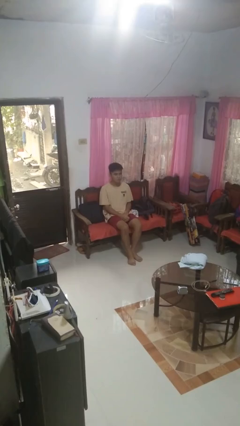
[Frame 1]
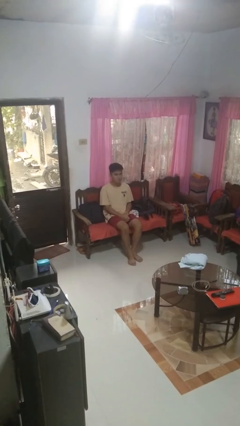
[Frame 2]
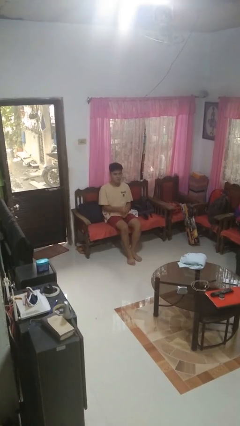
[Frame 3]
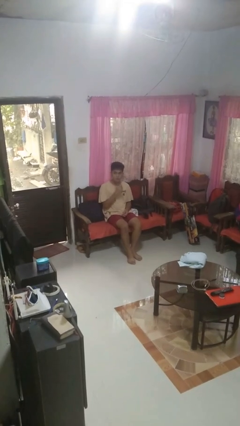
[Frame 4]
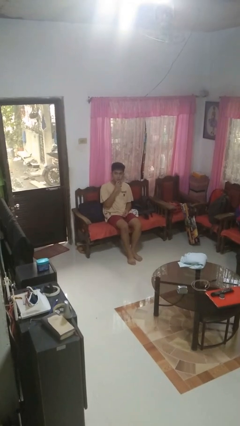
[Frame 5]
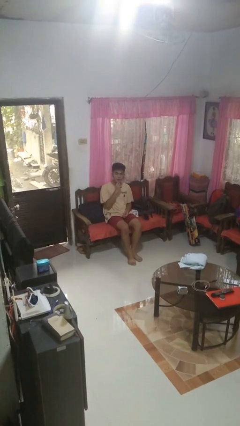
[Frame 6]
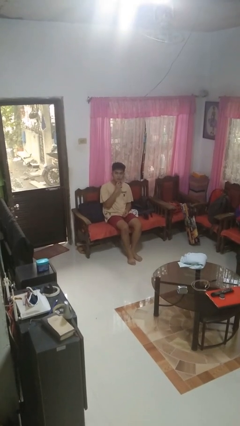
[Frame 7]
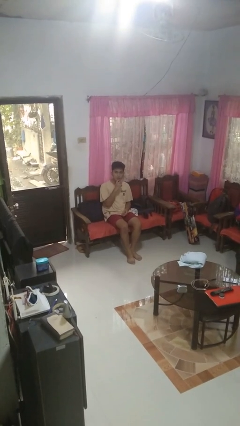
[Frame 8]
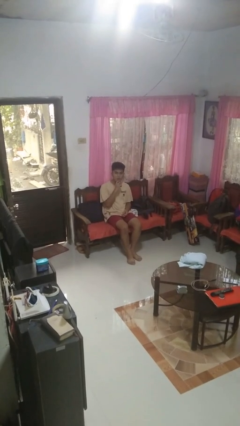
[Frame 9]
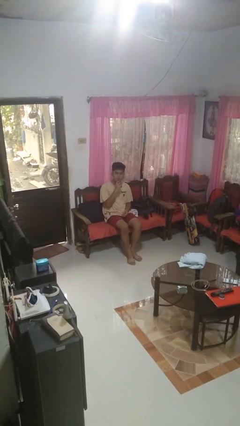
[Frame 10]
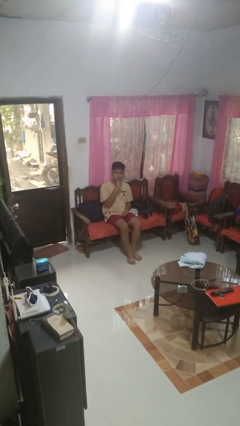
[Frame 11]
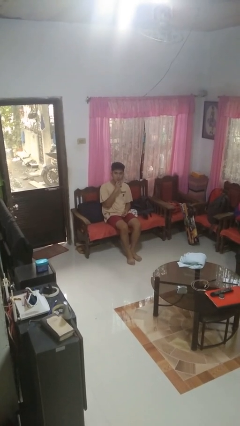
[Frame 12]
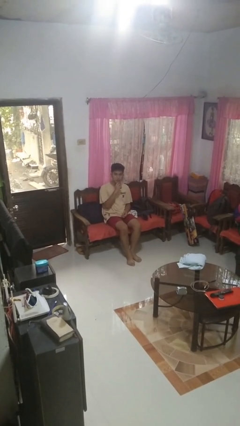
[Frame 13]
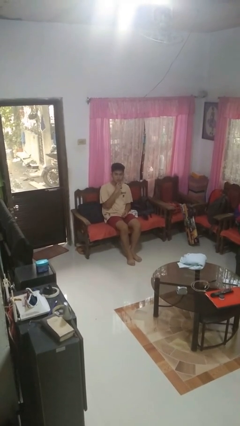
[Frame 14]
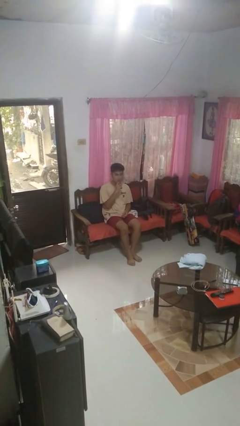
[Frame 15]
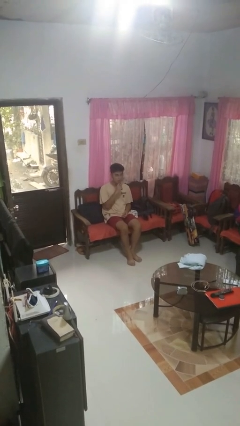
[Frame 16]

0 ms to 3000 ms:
person strokes chin

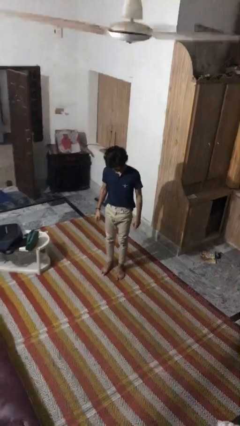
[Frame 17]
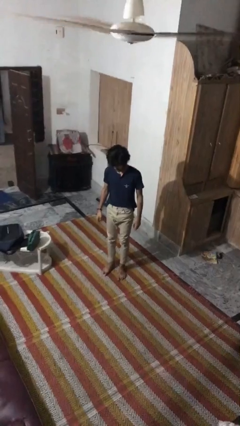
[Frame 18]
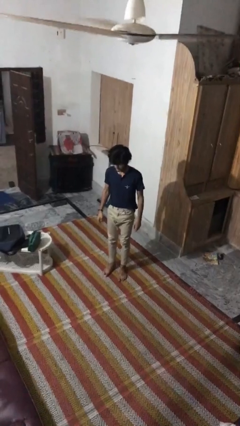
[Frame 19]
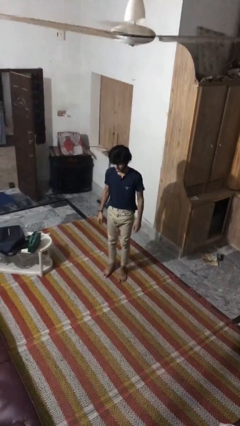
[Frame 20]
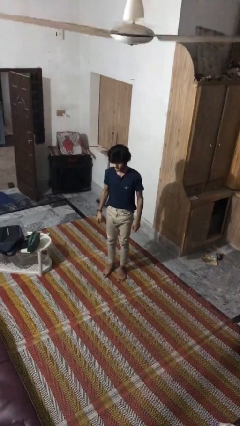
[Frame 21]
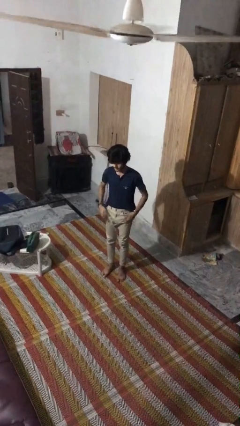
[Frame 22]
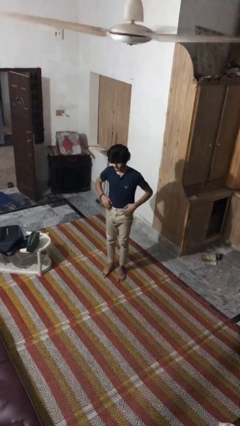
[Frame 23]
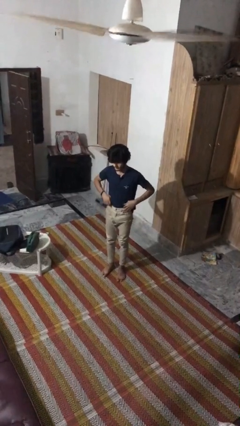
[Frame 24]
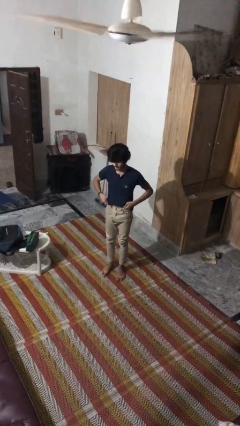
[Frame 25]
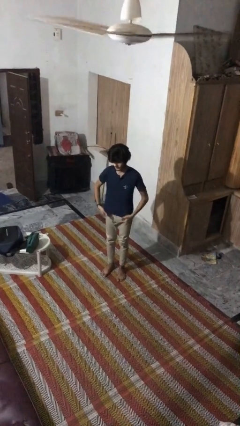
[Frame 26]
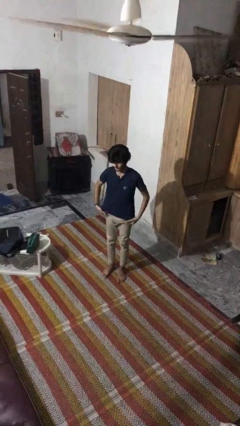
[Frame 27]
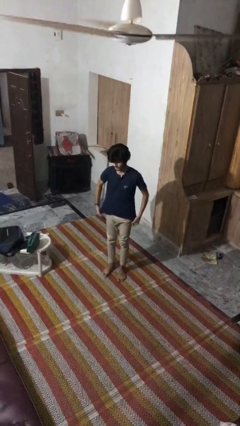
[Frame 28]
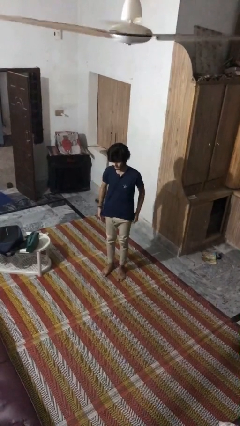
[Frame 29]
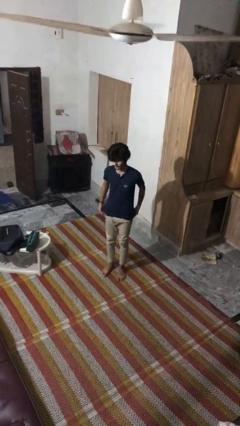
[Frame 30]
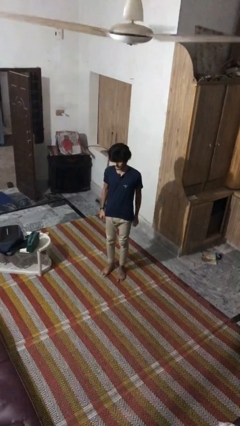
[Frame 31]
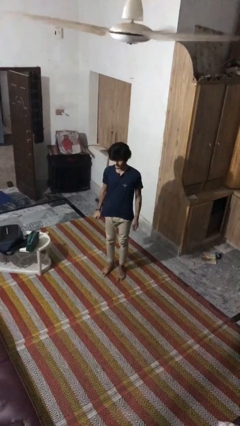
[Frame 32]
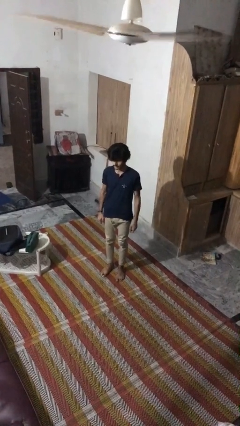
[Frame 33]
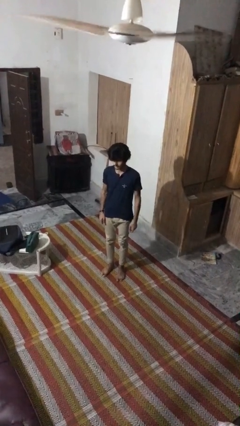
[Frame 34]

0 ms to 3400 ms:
person untucks shirt

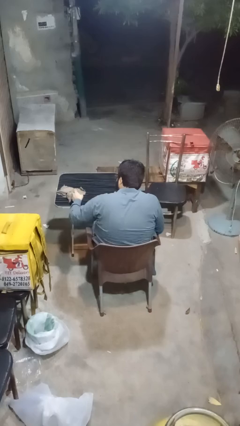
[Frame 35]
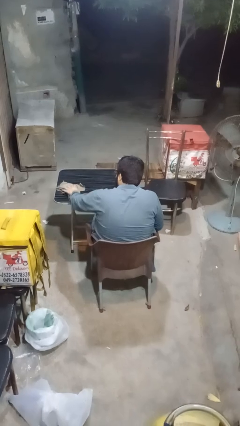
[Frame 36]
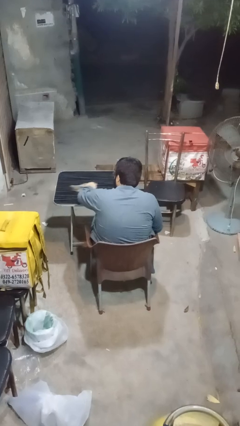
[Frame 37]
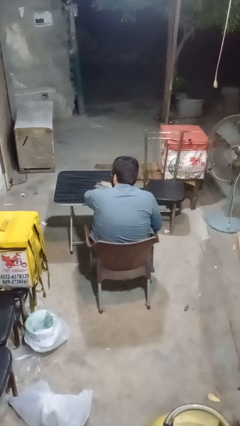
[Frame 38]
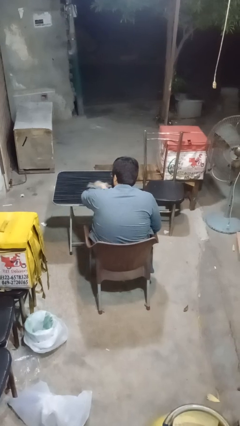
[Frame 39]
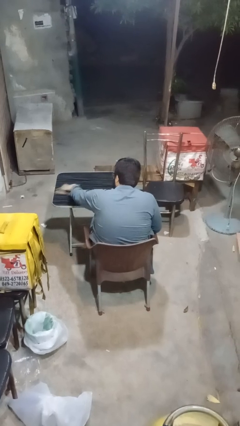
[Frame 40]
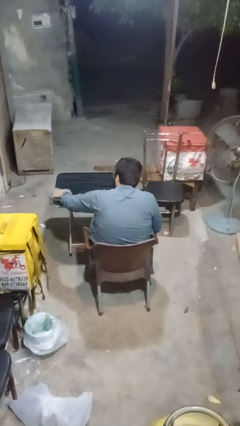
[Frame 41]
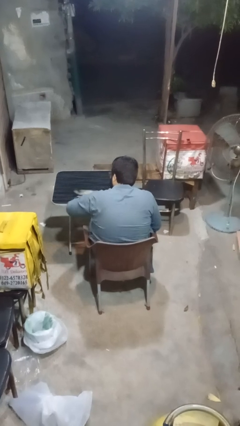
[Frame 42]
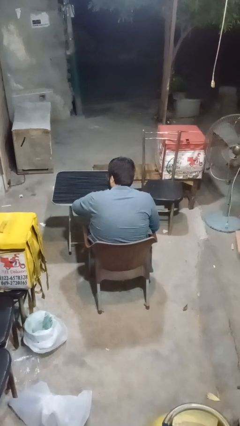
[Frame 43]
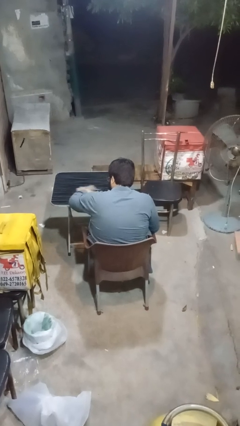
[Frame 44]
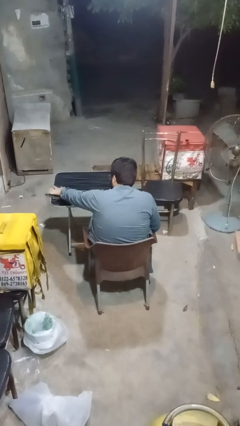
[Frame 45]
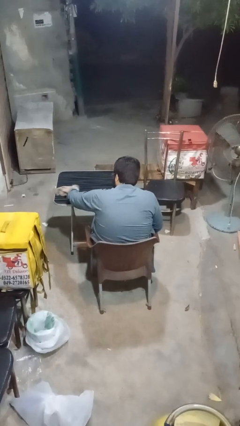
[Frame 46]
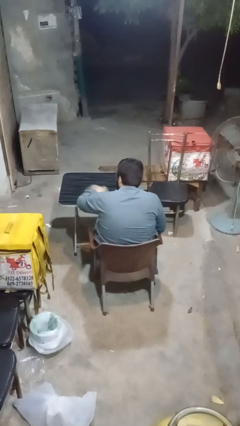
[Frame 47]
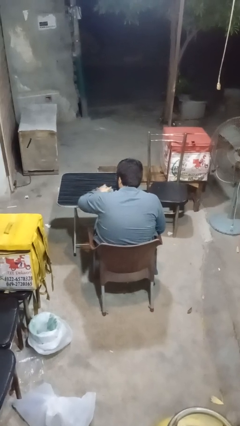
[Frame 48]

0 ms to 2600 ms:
person cleans table with rag

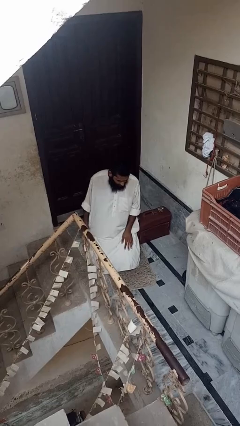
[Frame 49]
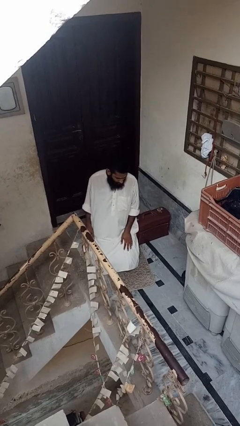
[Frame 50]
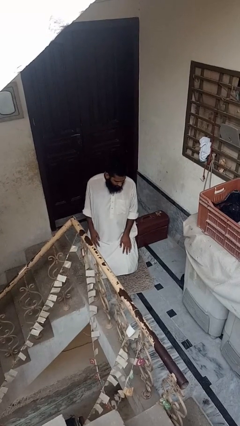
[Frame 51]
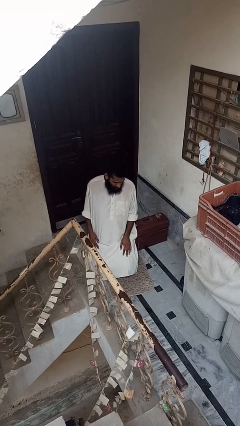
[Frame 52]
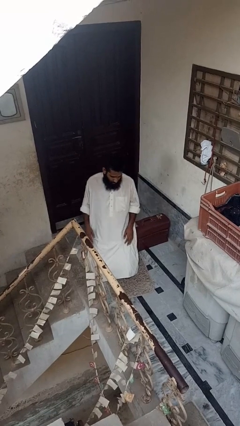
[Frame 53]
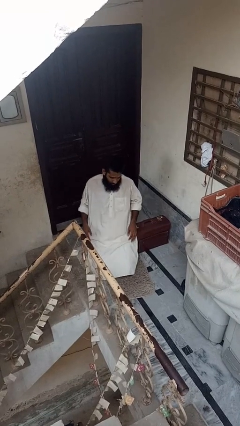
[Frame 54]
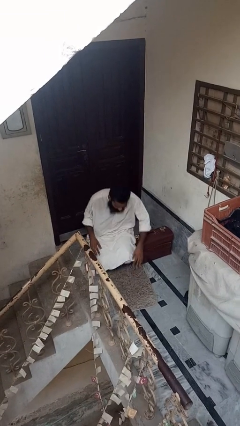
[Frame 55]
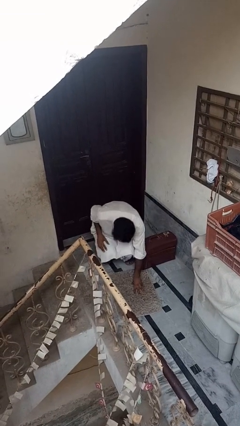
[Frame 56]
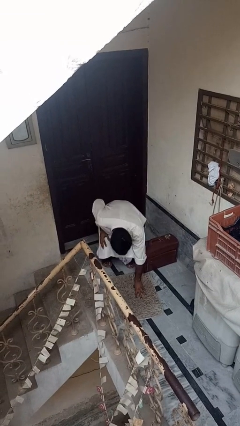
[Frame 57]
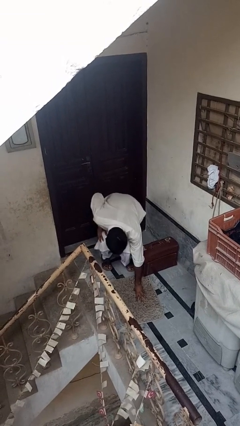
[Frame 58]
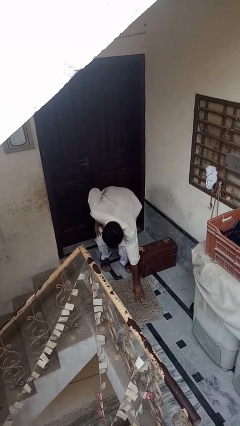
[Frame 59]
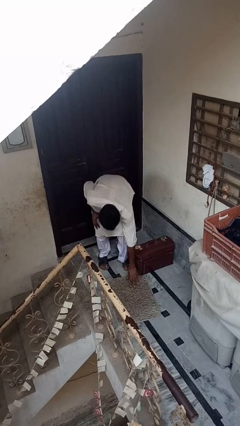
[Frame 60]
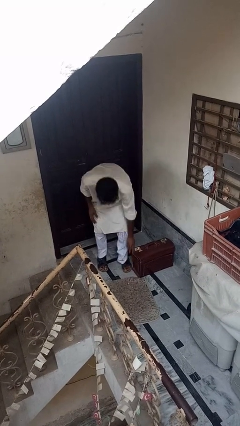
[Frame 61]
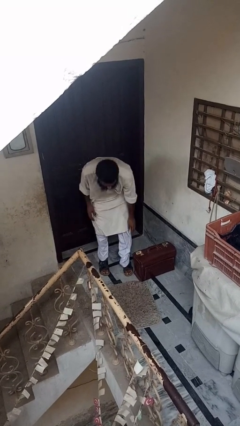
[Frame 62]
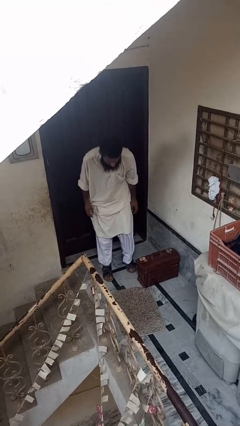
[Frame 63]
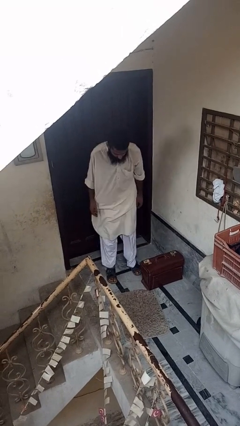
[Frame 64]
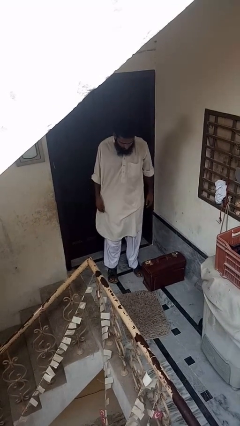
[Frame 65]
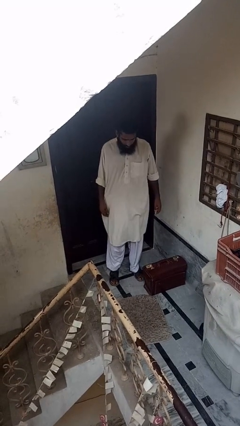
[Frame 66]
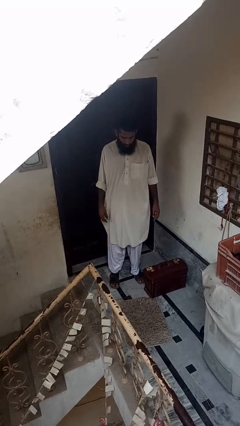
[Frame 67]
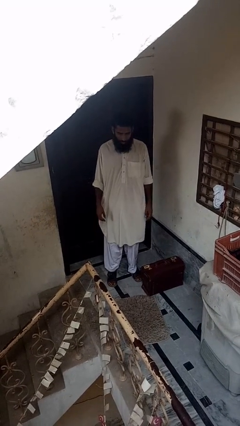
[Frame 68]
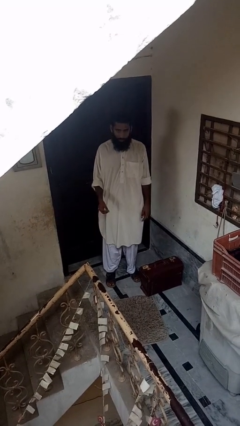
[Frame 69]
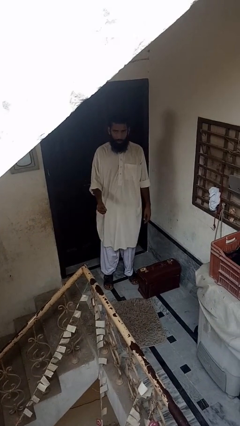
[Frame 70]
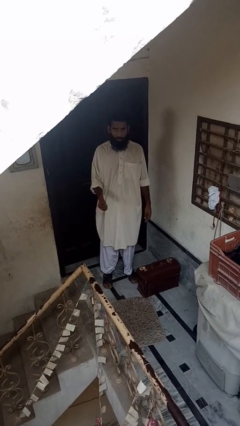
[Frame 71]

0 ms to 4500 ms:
person stands up from floor

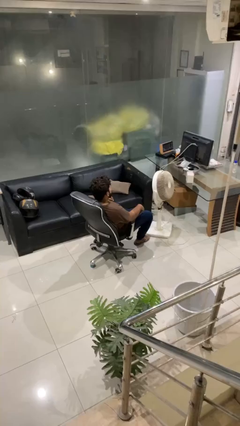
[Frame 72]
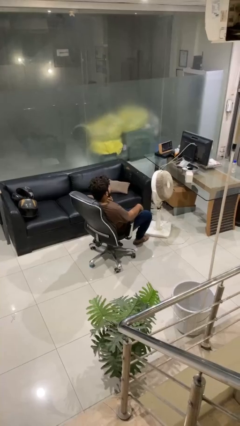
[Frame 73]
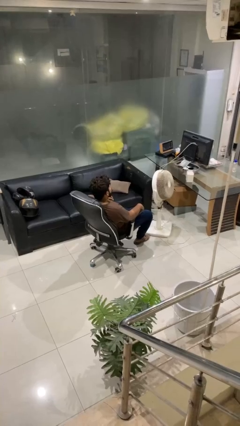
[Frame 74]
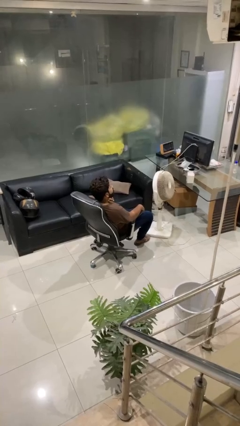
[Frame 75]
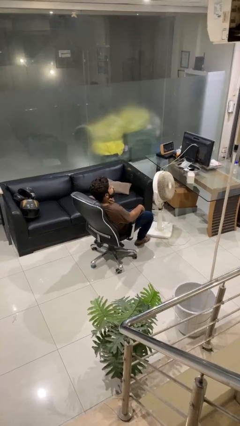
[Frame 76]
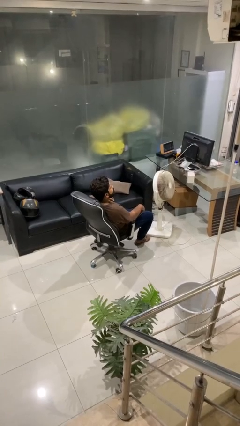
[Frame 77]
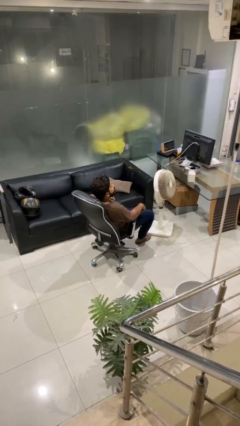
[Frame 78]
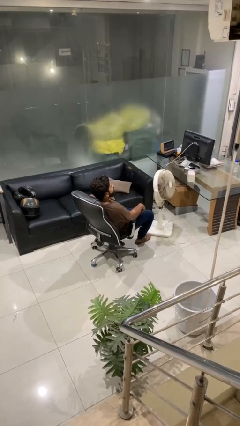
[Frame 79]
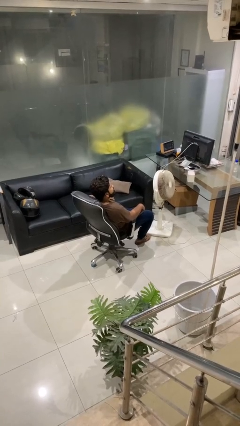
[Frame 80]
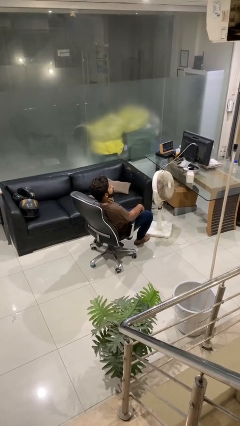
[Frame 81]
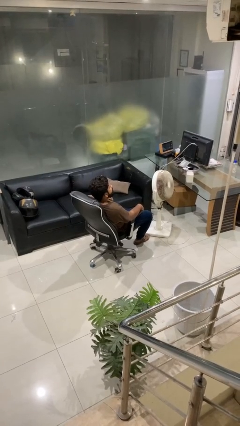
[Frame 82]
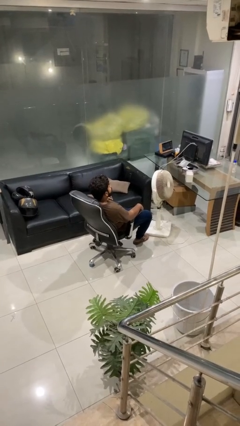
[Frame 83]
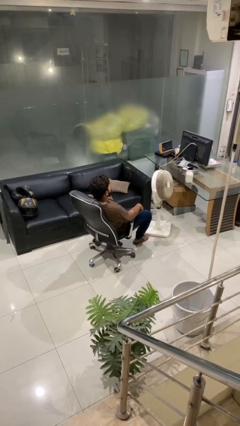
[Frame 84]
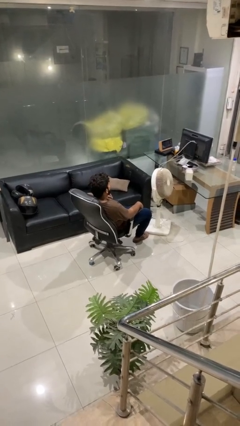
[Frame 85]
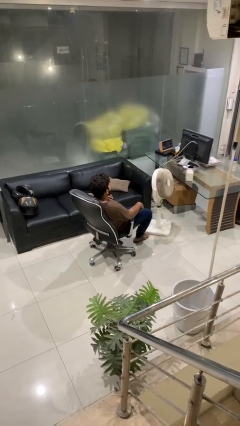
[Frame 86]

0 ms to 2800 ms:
person sticks out tongue

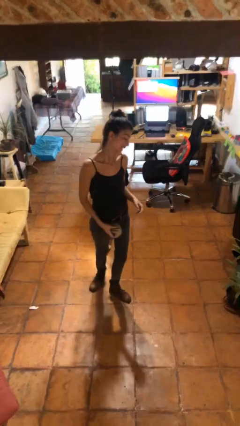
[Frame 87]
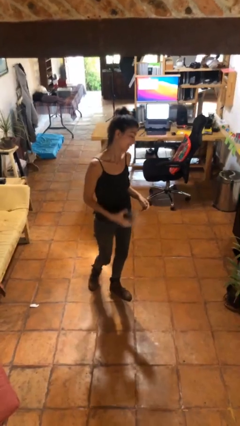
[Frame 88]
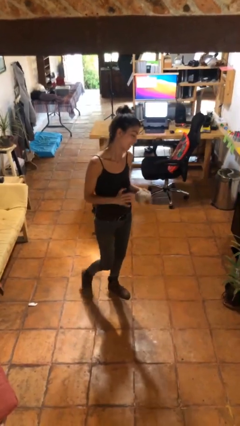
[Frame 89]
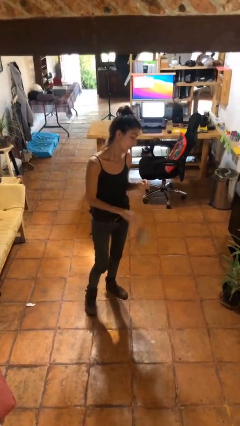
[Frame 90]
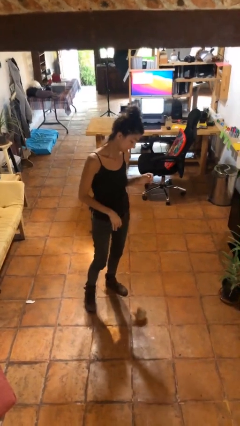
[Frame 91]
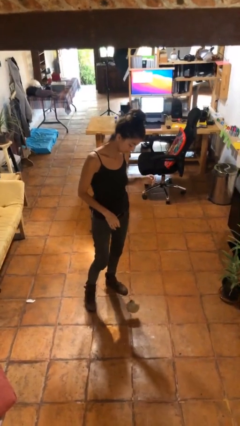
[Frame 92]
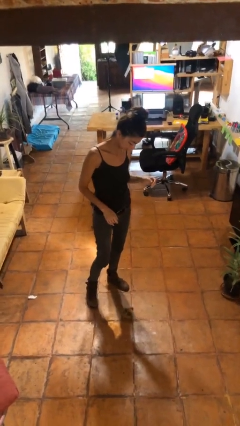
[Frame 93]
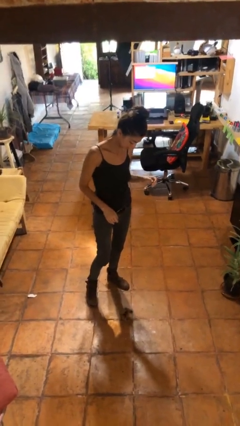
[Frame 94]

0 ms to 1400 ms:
person drops object
